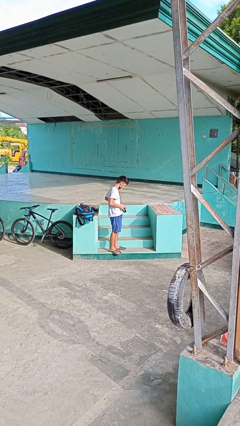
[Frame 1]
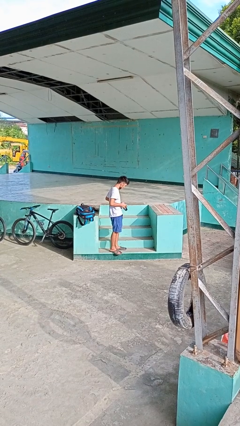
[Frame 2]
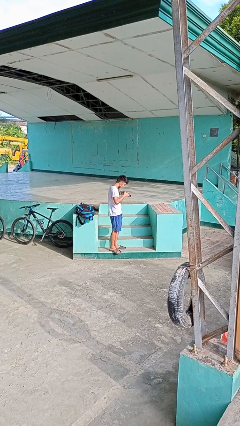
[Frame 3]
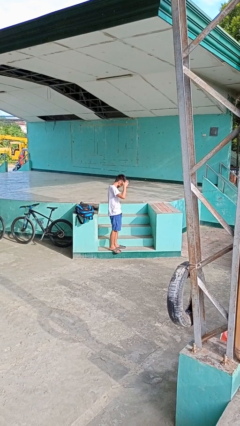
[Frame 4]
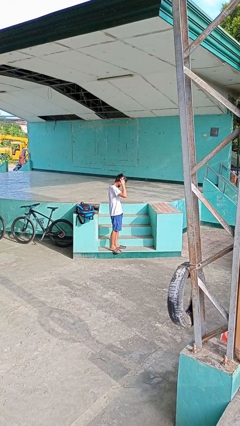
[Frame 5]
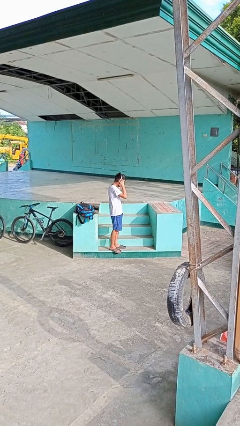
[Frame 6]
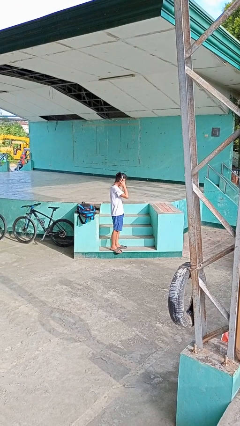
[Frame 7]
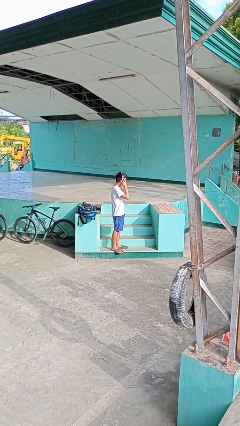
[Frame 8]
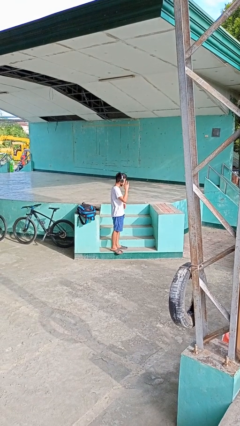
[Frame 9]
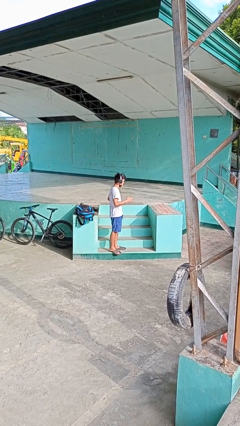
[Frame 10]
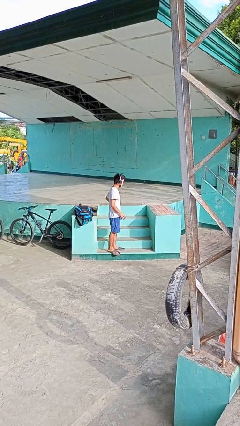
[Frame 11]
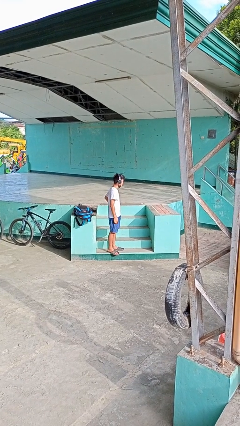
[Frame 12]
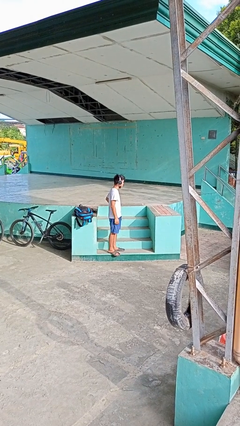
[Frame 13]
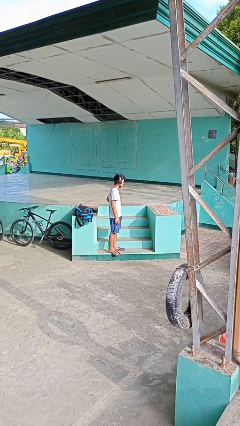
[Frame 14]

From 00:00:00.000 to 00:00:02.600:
person puts on headphones

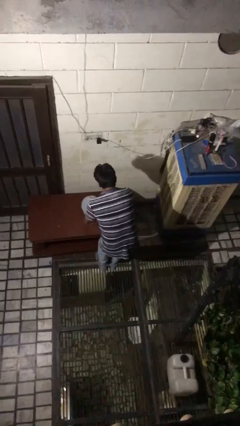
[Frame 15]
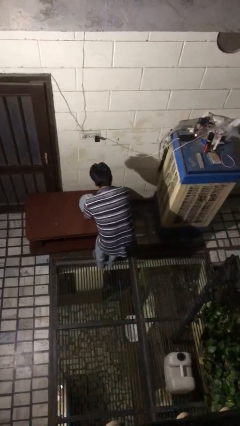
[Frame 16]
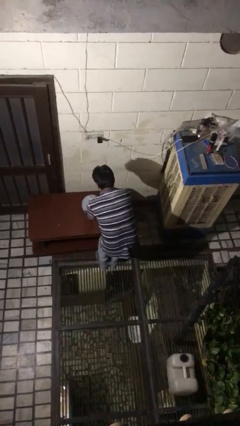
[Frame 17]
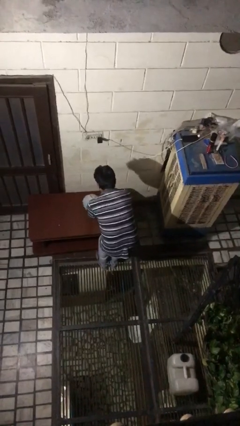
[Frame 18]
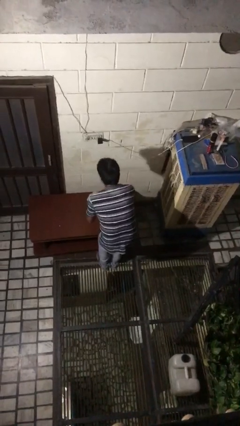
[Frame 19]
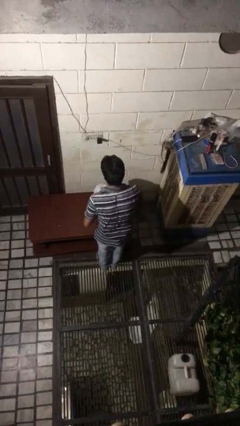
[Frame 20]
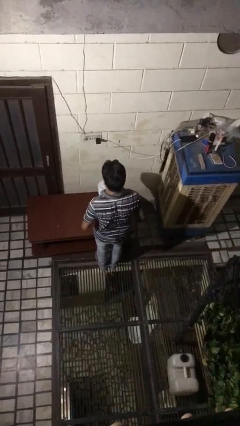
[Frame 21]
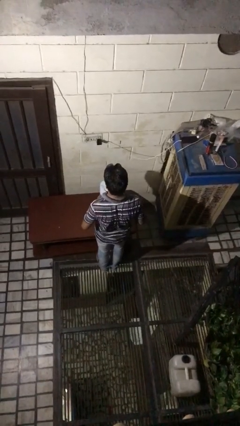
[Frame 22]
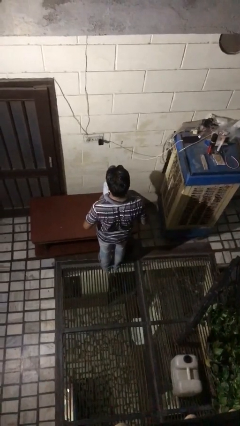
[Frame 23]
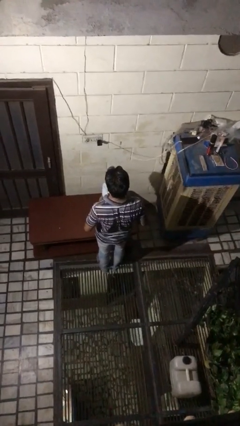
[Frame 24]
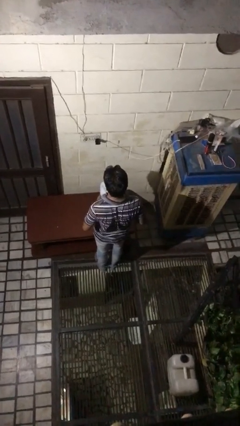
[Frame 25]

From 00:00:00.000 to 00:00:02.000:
person picks up object from table

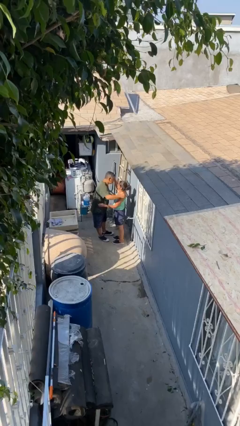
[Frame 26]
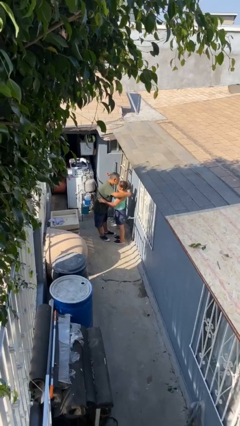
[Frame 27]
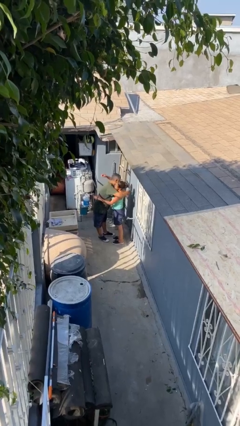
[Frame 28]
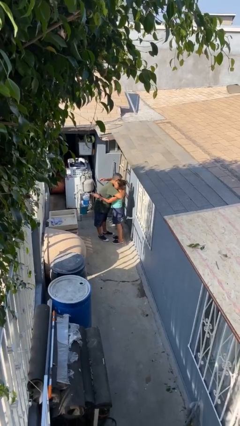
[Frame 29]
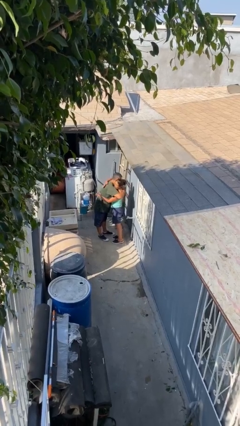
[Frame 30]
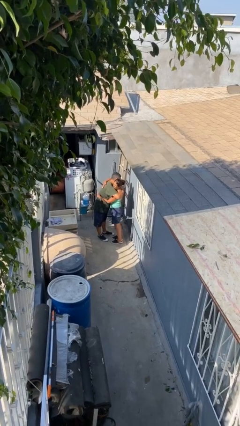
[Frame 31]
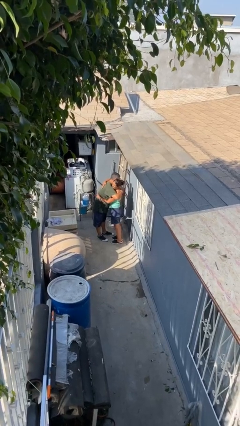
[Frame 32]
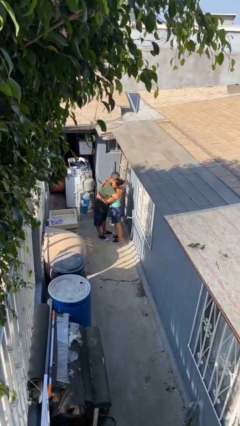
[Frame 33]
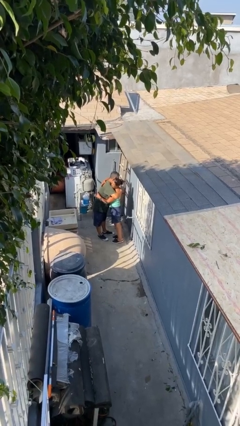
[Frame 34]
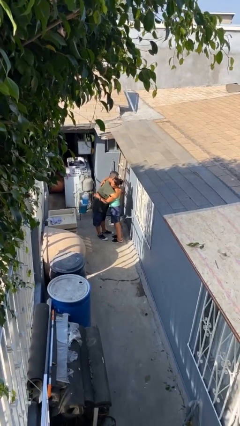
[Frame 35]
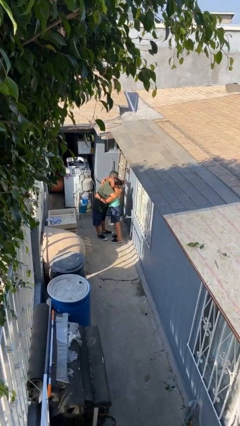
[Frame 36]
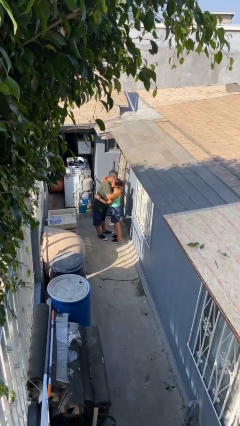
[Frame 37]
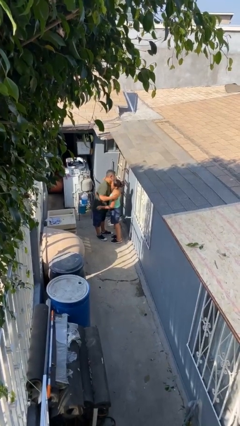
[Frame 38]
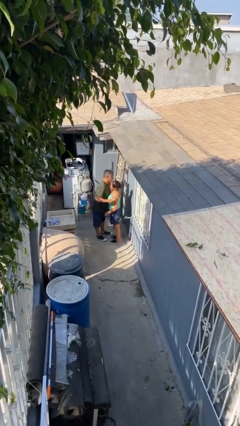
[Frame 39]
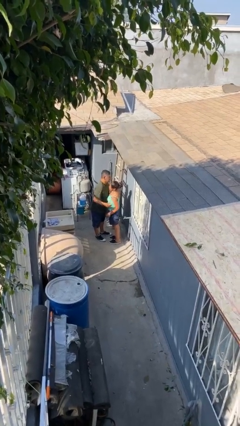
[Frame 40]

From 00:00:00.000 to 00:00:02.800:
person embraces person

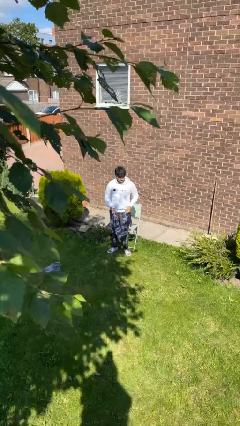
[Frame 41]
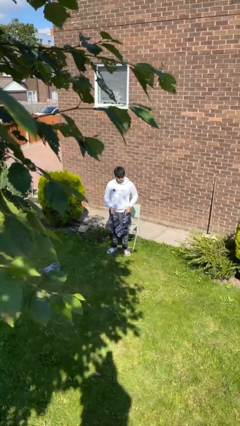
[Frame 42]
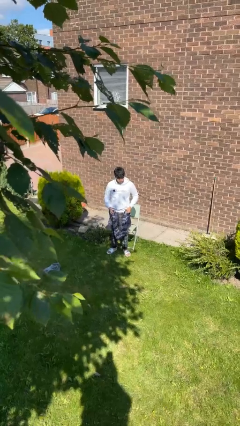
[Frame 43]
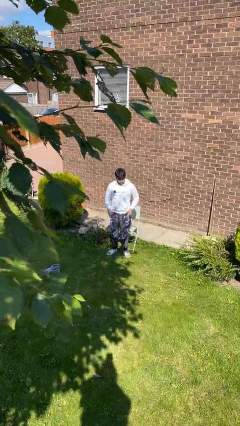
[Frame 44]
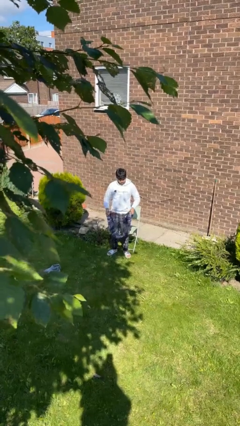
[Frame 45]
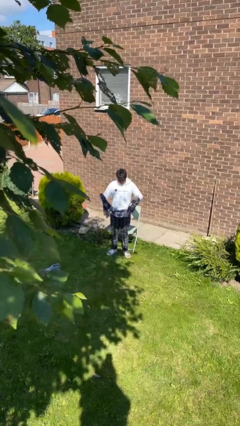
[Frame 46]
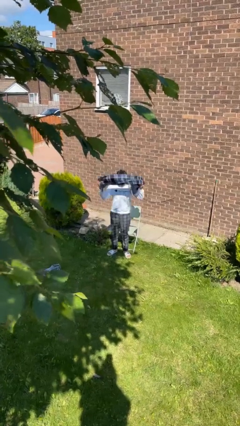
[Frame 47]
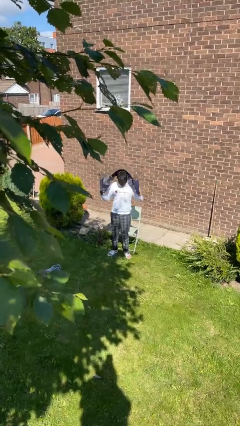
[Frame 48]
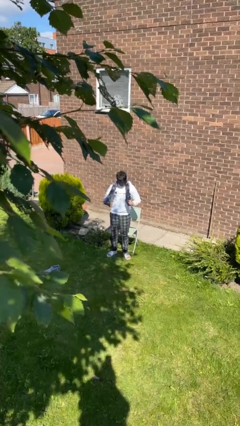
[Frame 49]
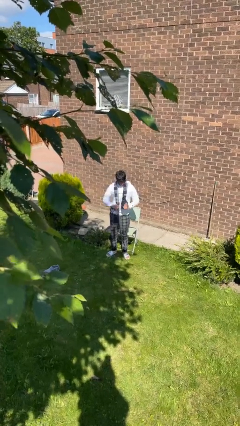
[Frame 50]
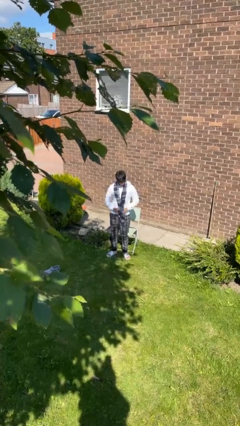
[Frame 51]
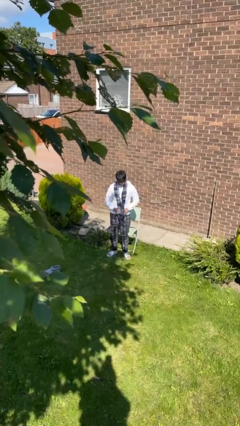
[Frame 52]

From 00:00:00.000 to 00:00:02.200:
person puts on scarf

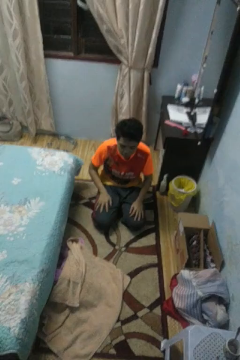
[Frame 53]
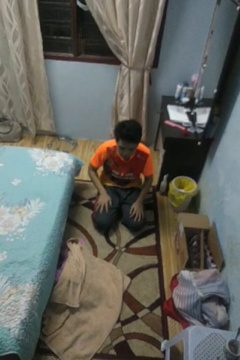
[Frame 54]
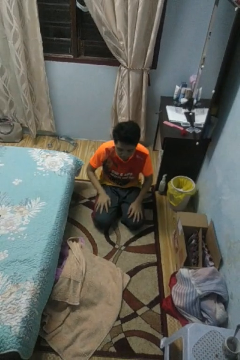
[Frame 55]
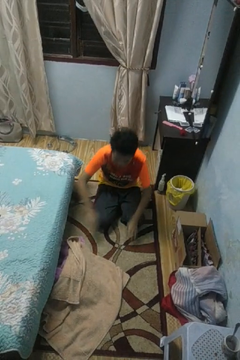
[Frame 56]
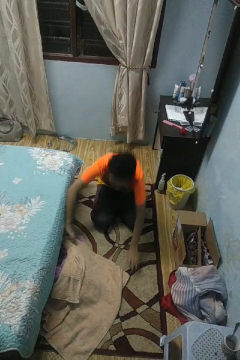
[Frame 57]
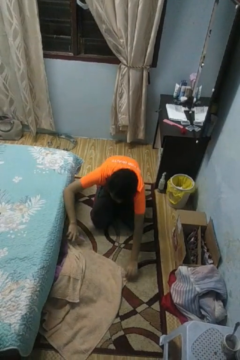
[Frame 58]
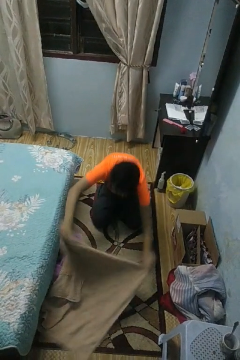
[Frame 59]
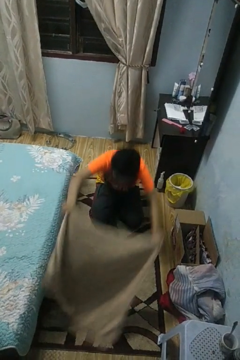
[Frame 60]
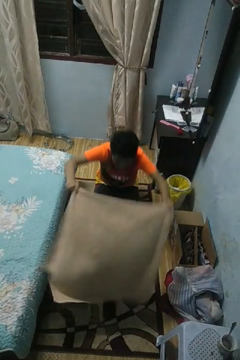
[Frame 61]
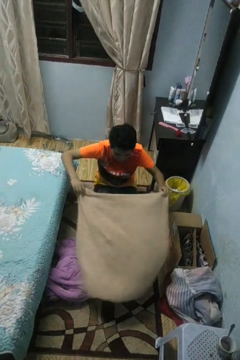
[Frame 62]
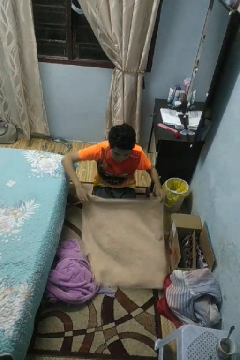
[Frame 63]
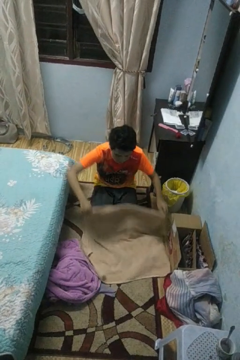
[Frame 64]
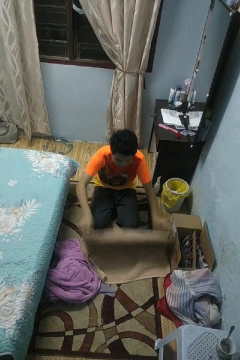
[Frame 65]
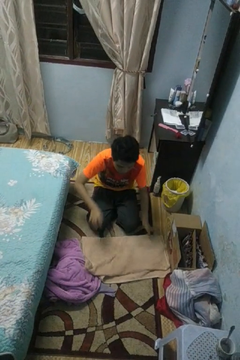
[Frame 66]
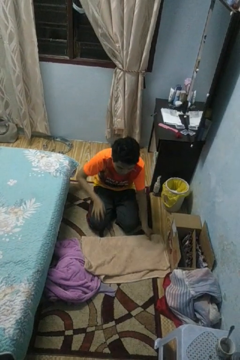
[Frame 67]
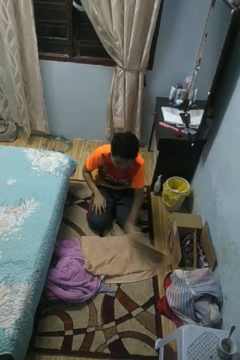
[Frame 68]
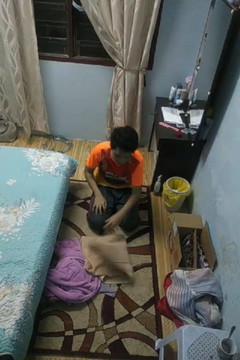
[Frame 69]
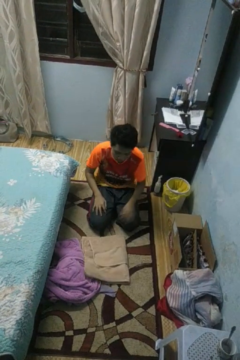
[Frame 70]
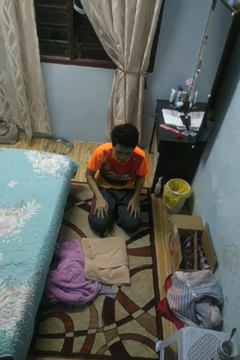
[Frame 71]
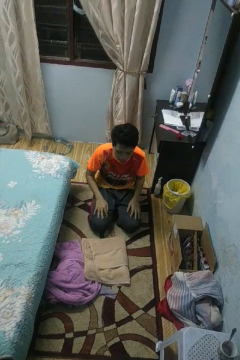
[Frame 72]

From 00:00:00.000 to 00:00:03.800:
person folds towel

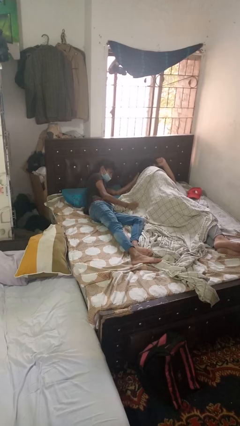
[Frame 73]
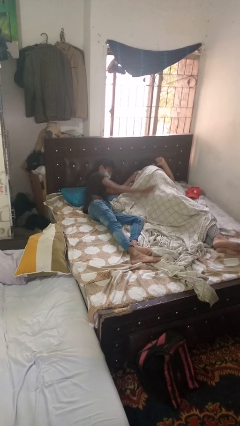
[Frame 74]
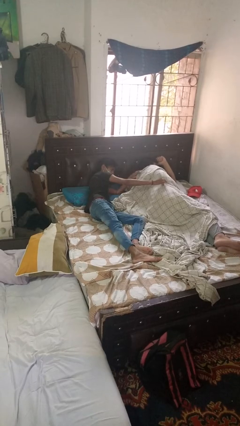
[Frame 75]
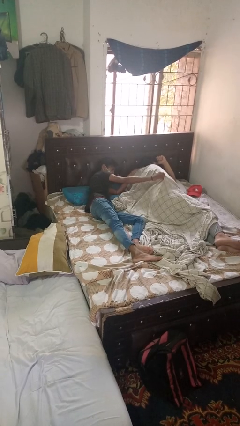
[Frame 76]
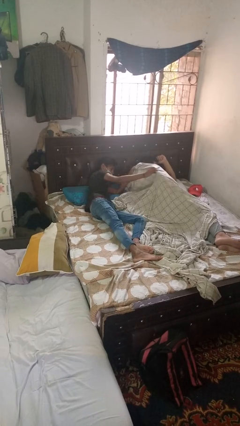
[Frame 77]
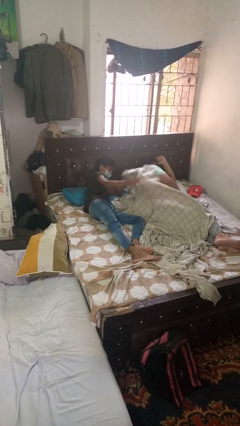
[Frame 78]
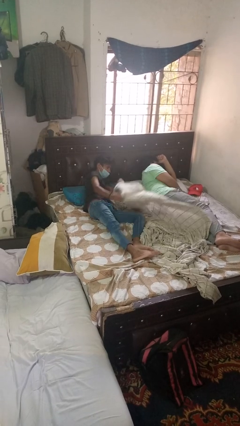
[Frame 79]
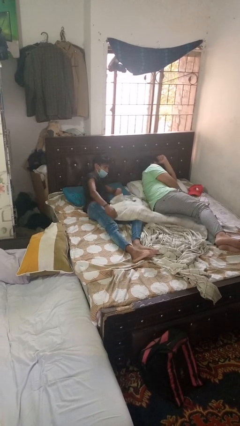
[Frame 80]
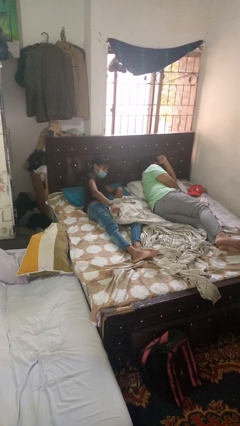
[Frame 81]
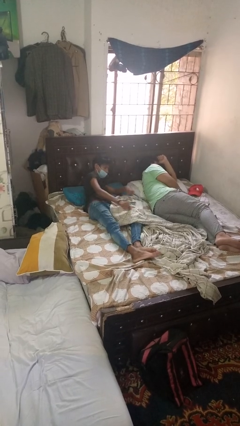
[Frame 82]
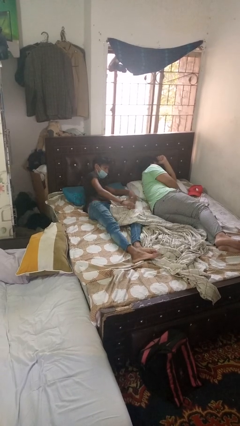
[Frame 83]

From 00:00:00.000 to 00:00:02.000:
person uncovers friend with blanket

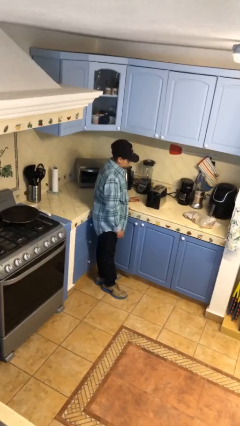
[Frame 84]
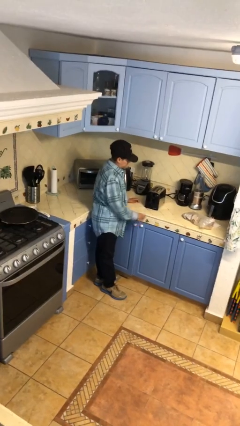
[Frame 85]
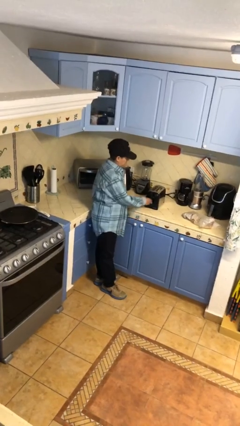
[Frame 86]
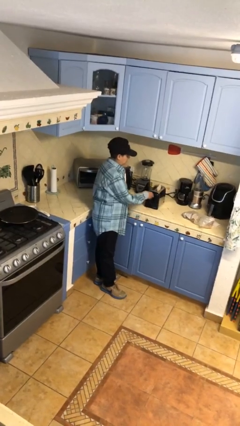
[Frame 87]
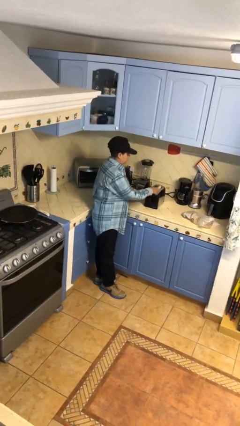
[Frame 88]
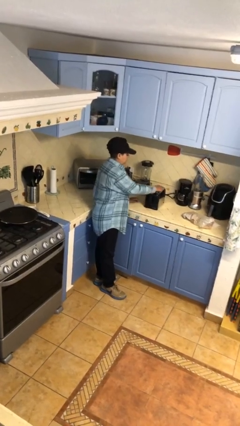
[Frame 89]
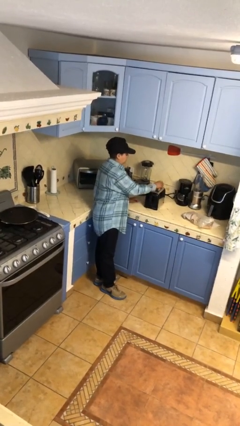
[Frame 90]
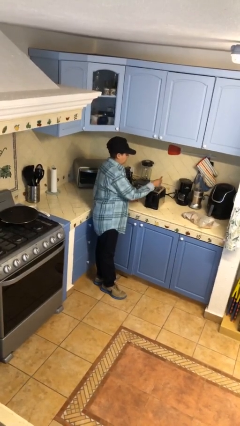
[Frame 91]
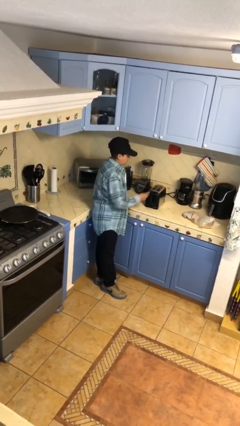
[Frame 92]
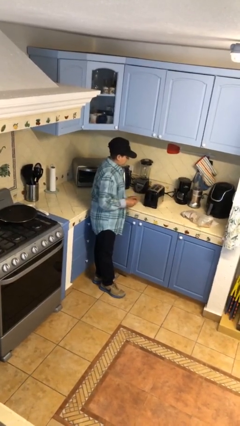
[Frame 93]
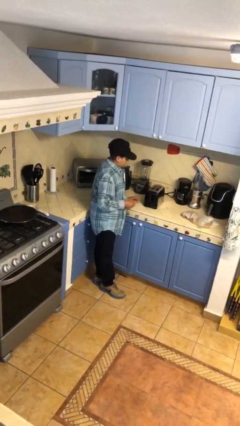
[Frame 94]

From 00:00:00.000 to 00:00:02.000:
person takes object from toaster
